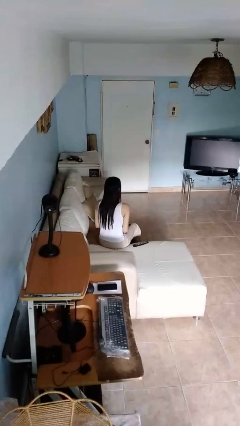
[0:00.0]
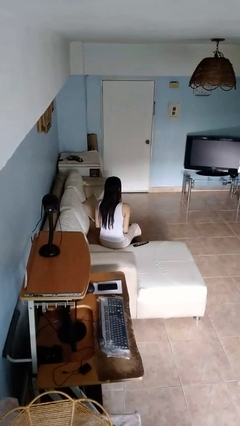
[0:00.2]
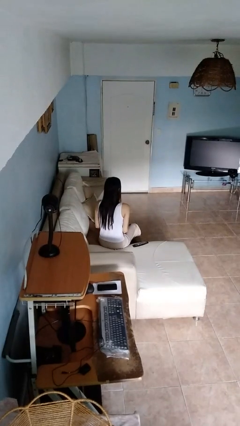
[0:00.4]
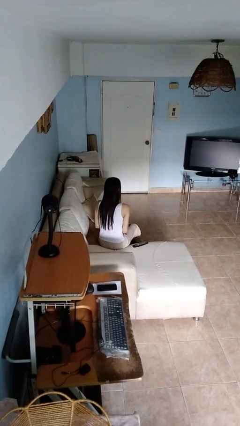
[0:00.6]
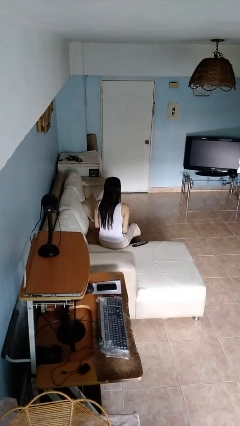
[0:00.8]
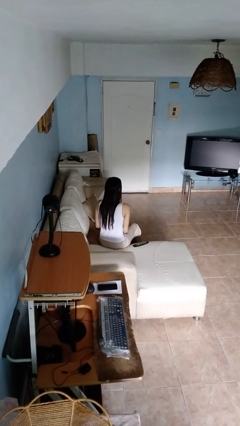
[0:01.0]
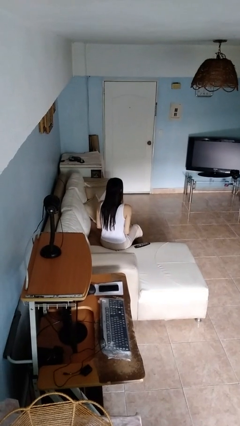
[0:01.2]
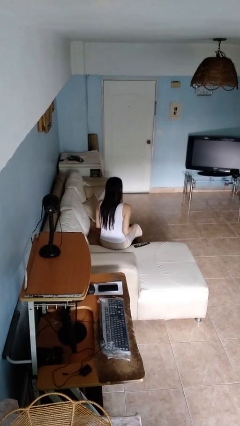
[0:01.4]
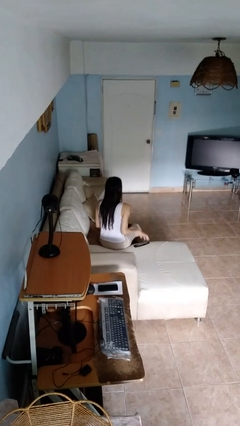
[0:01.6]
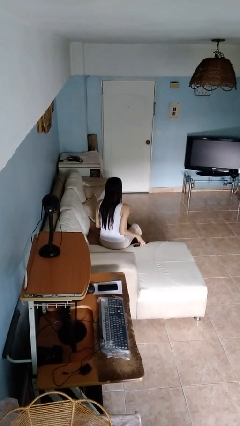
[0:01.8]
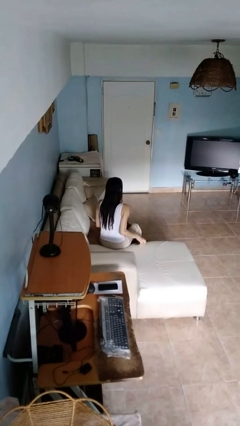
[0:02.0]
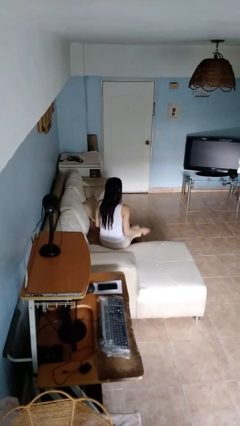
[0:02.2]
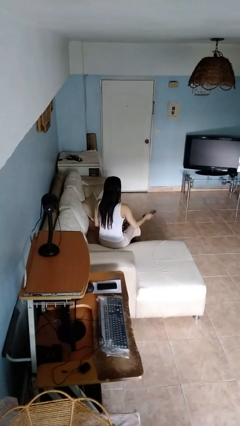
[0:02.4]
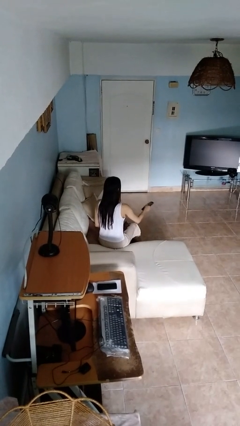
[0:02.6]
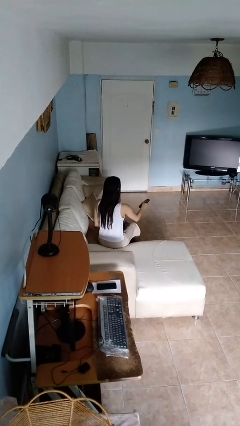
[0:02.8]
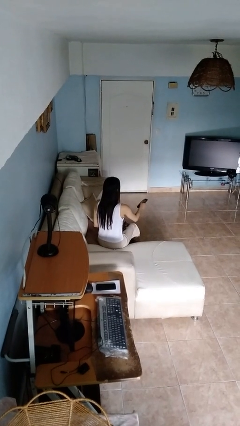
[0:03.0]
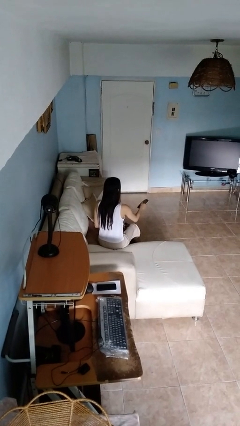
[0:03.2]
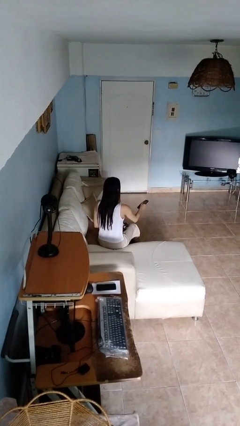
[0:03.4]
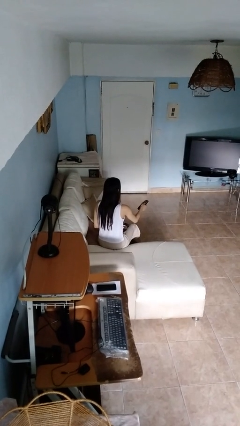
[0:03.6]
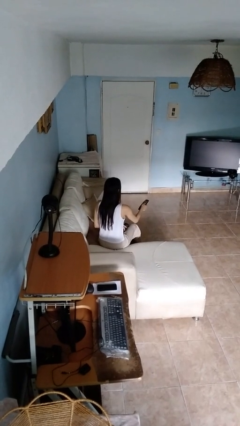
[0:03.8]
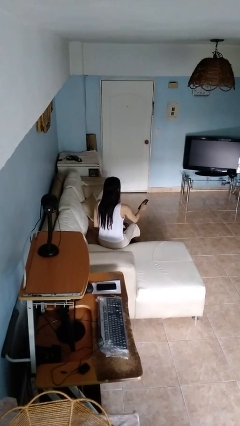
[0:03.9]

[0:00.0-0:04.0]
person uses television remote

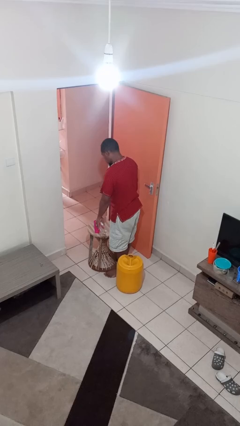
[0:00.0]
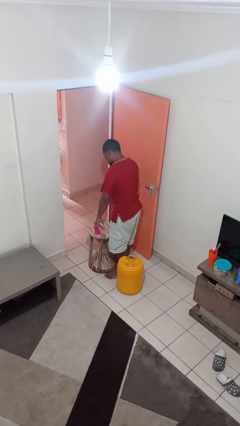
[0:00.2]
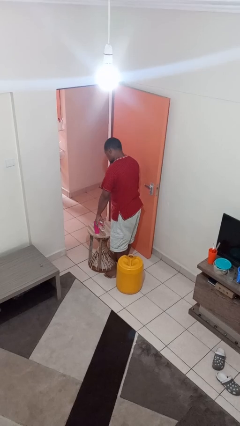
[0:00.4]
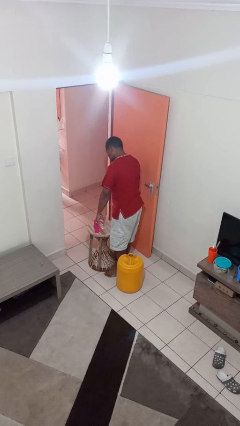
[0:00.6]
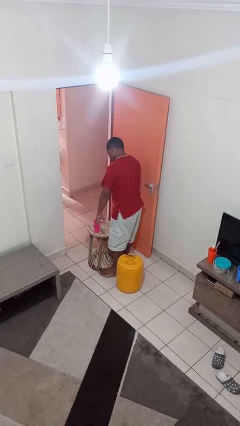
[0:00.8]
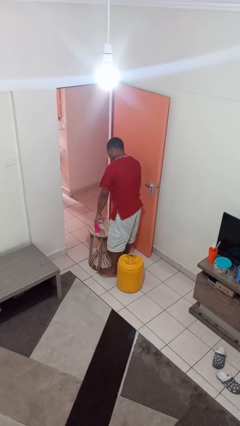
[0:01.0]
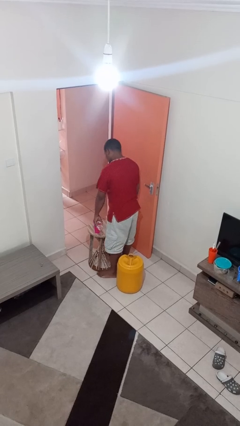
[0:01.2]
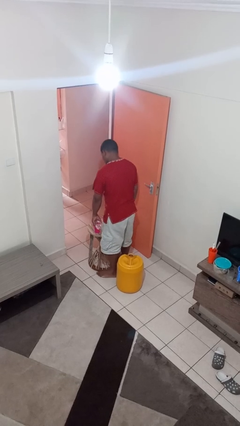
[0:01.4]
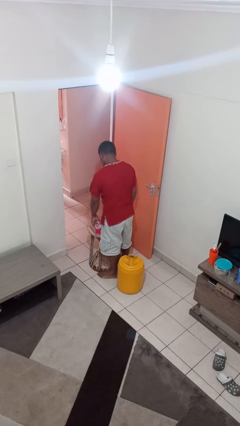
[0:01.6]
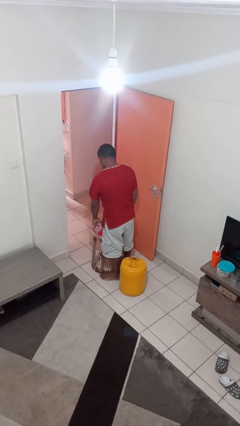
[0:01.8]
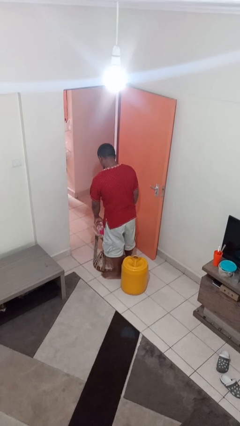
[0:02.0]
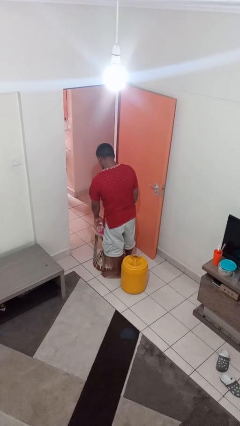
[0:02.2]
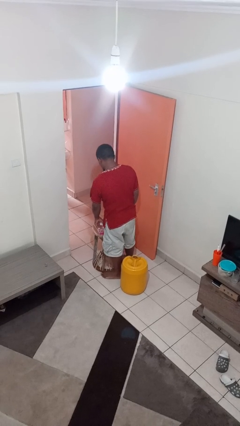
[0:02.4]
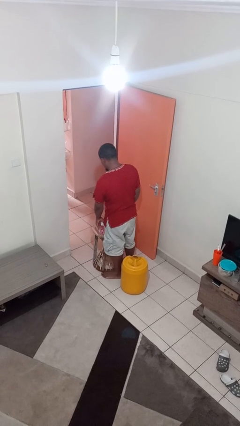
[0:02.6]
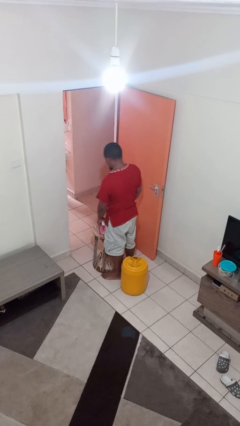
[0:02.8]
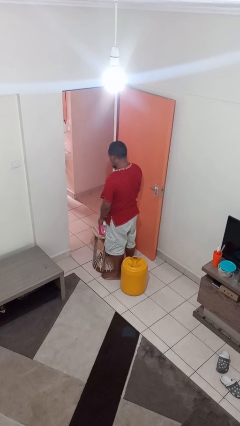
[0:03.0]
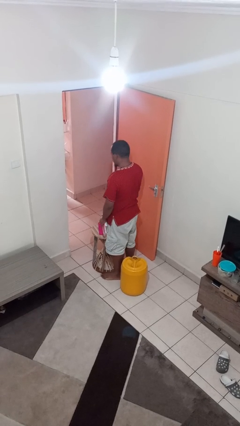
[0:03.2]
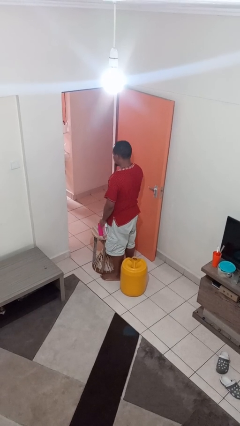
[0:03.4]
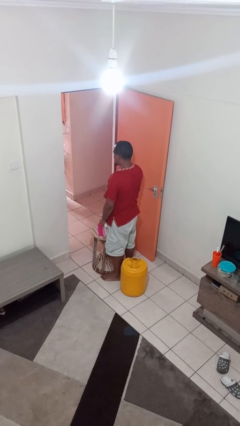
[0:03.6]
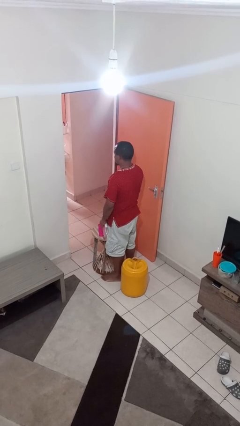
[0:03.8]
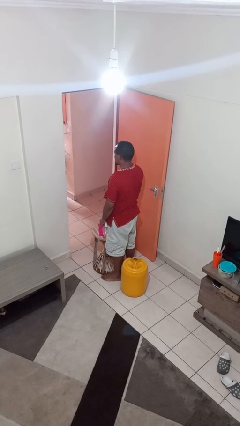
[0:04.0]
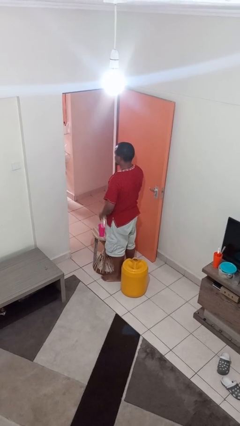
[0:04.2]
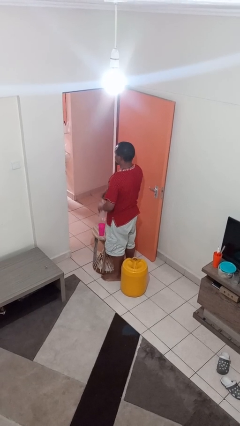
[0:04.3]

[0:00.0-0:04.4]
person pours liquid into cup

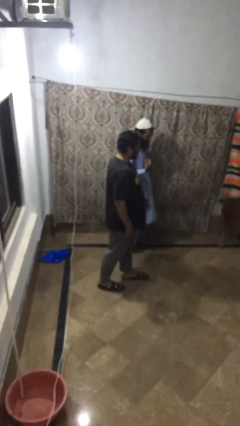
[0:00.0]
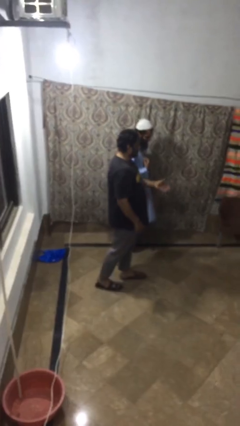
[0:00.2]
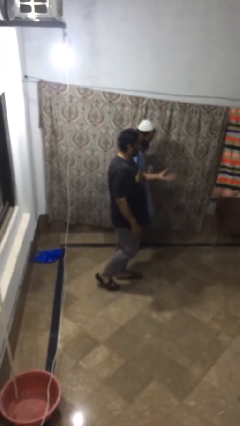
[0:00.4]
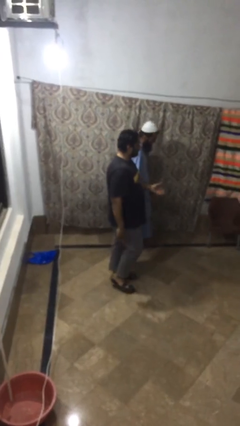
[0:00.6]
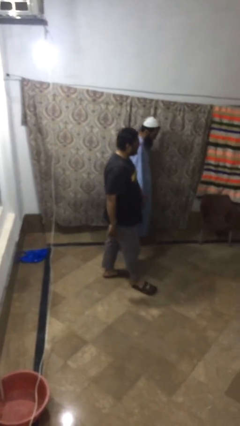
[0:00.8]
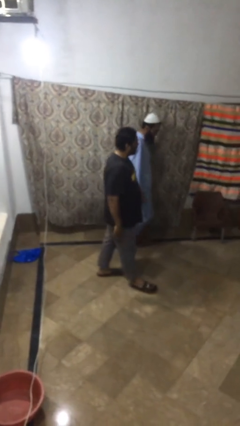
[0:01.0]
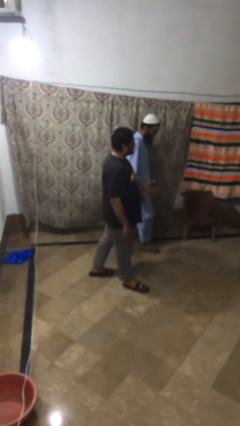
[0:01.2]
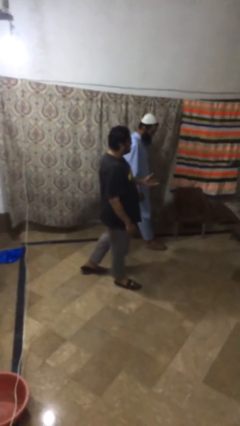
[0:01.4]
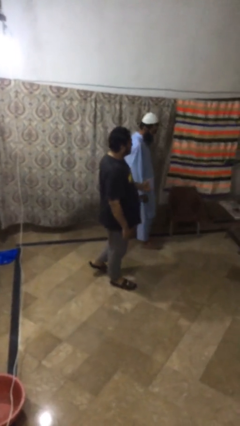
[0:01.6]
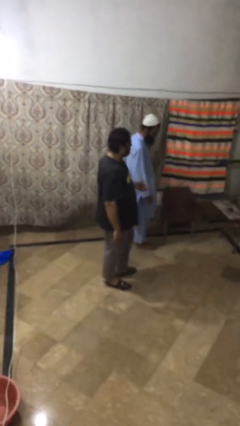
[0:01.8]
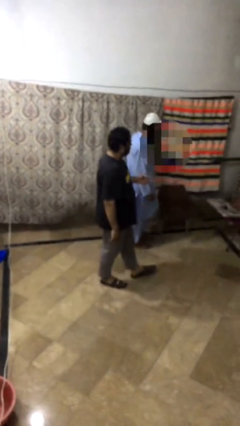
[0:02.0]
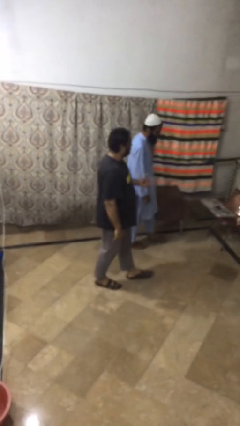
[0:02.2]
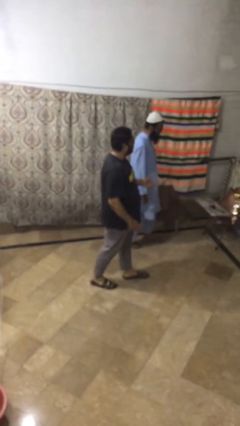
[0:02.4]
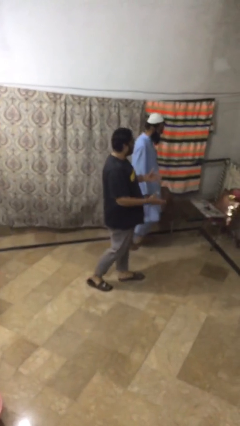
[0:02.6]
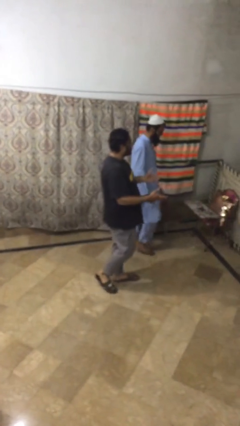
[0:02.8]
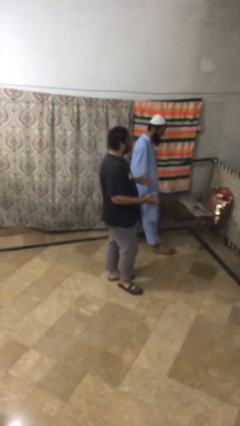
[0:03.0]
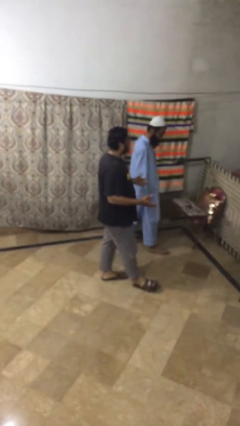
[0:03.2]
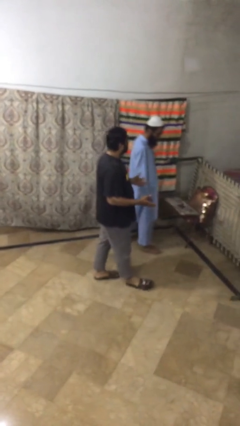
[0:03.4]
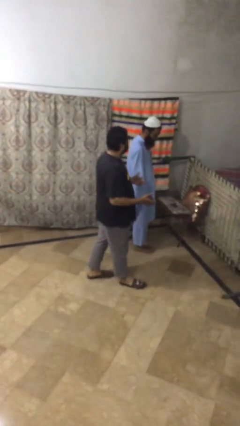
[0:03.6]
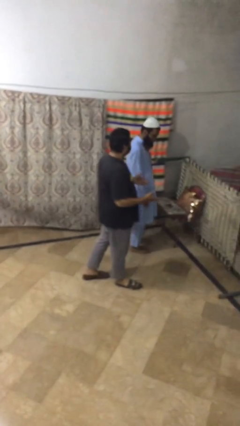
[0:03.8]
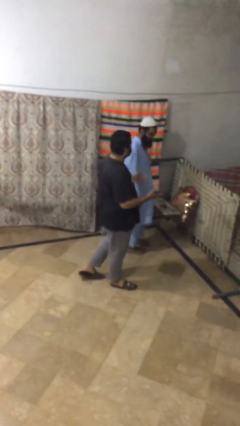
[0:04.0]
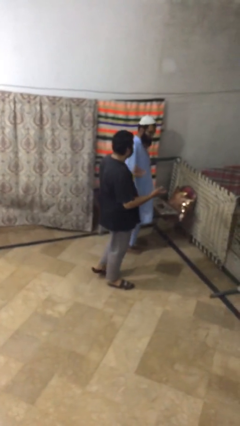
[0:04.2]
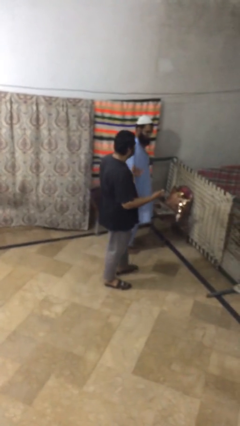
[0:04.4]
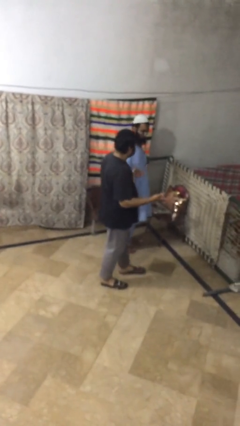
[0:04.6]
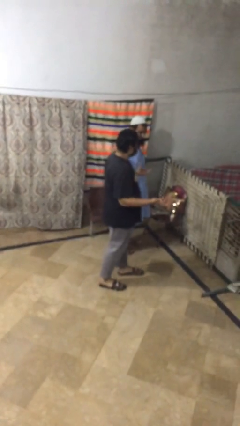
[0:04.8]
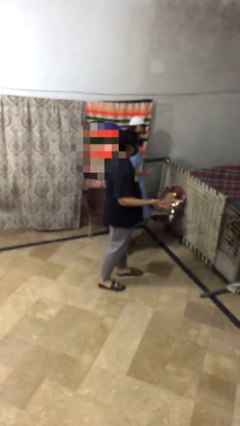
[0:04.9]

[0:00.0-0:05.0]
person talks to person

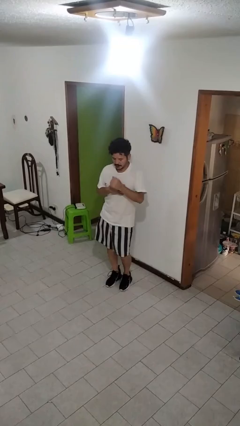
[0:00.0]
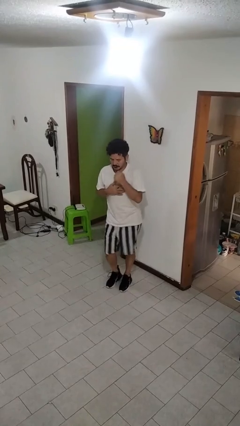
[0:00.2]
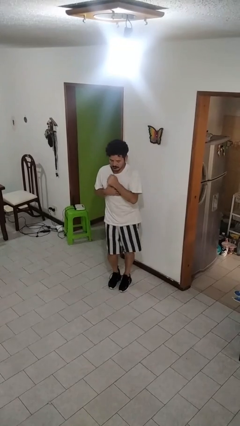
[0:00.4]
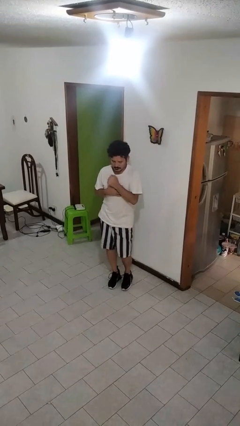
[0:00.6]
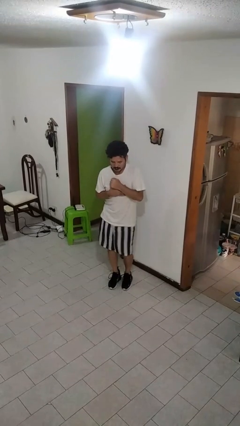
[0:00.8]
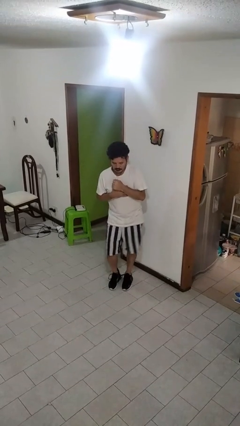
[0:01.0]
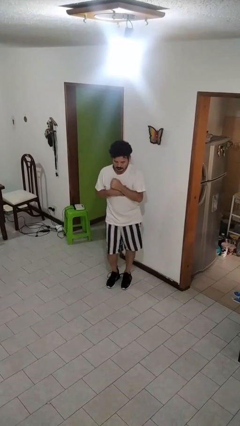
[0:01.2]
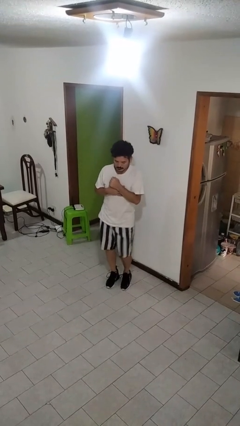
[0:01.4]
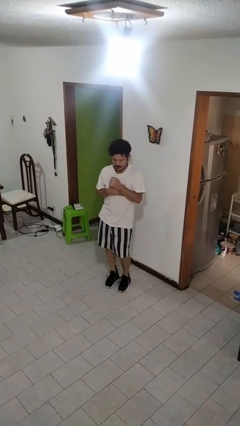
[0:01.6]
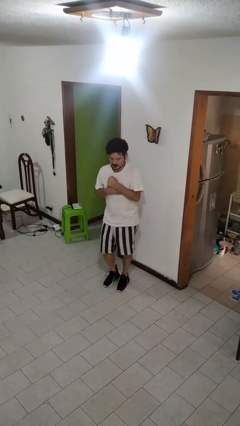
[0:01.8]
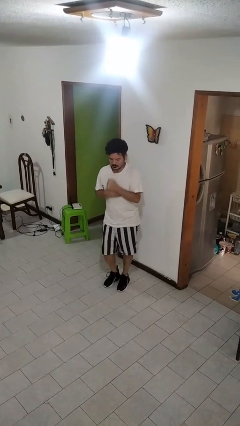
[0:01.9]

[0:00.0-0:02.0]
person dances in place

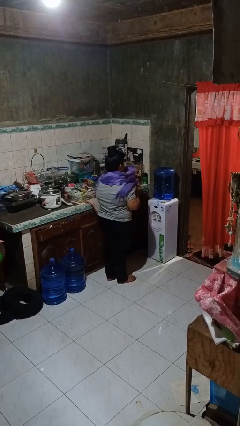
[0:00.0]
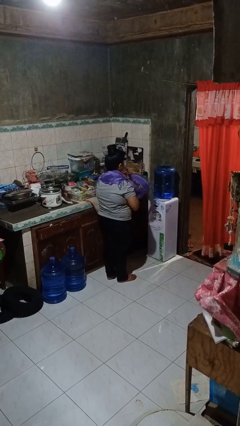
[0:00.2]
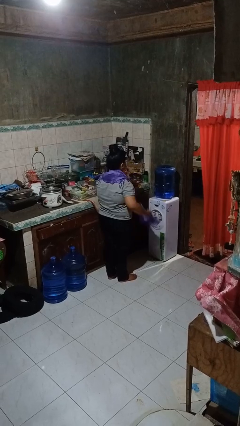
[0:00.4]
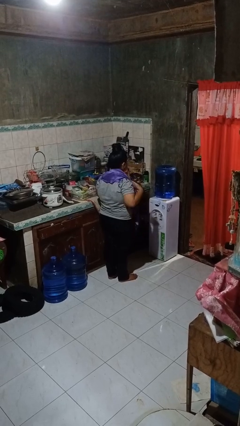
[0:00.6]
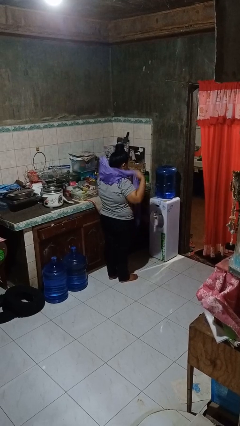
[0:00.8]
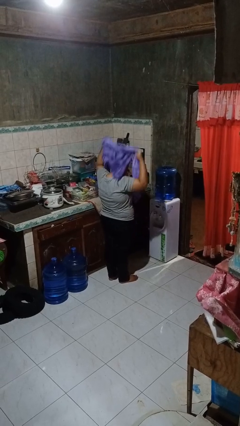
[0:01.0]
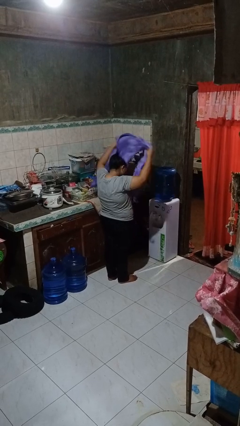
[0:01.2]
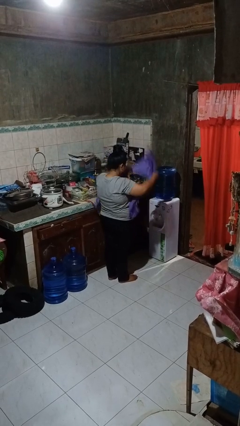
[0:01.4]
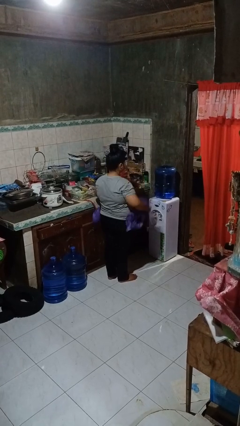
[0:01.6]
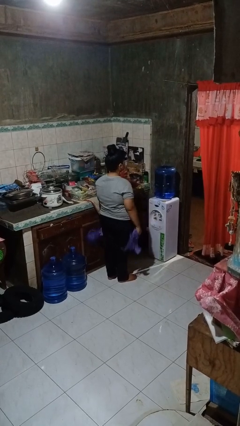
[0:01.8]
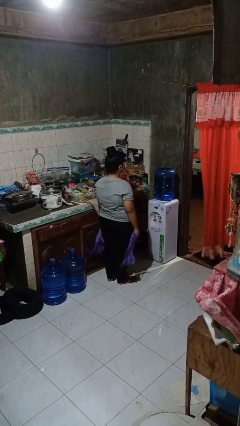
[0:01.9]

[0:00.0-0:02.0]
person takes off scarf

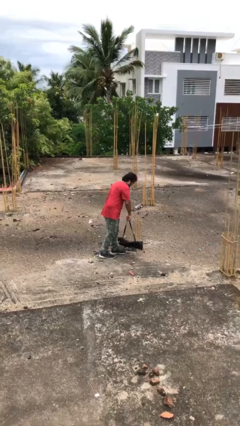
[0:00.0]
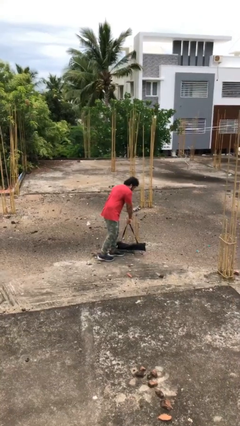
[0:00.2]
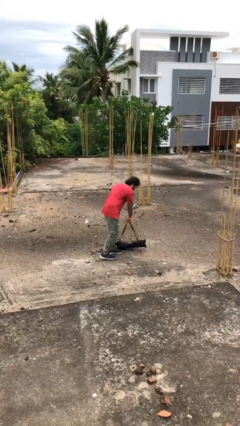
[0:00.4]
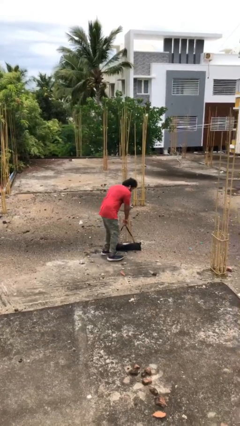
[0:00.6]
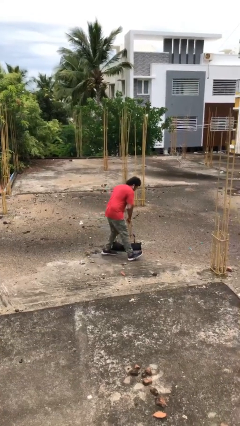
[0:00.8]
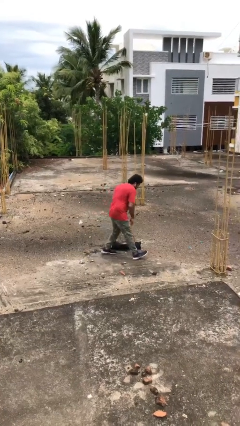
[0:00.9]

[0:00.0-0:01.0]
person puts down object on floor
